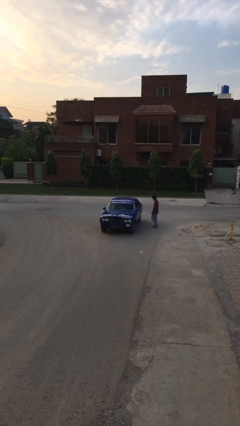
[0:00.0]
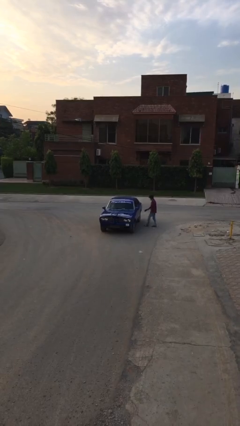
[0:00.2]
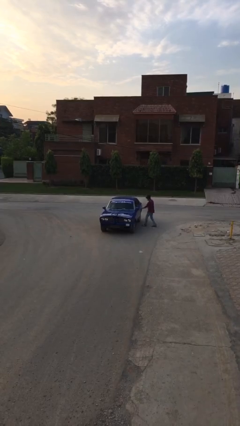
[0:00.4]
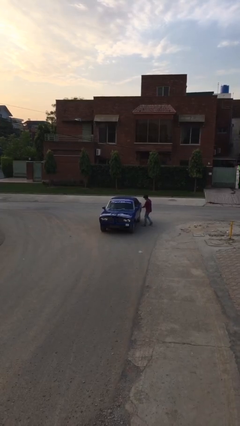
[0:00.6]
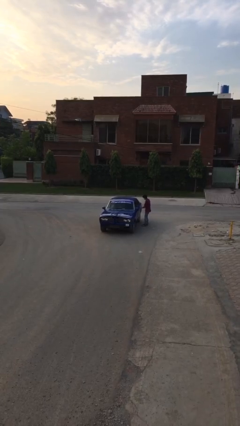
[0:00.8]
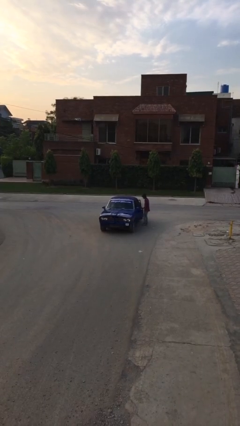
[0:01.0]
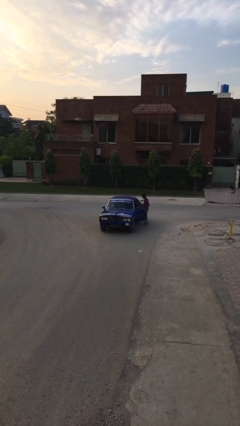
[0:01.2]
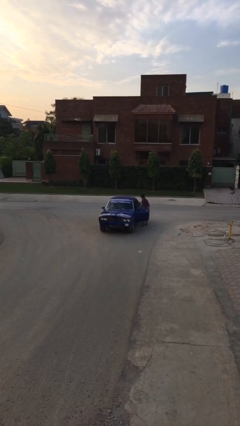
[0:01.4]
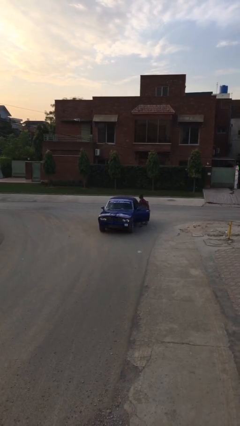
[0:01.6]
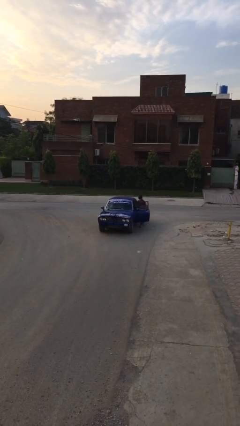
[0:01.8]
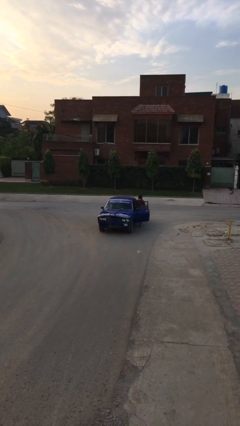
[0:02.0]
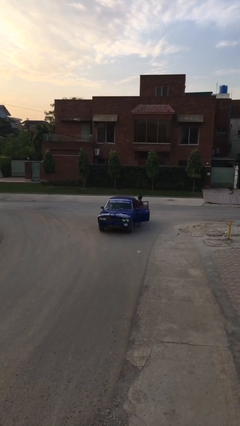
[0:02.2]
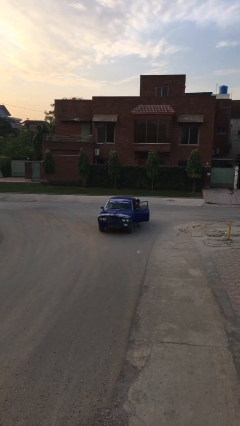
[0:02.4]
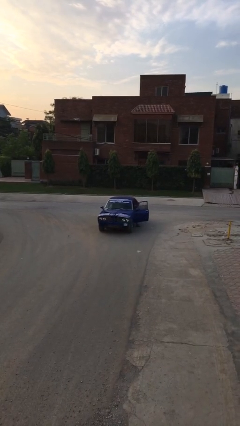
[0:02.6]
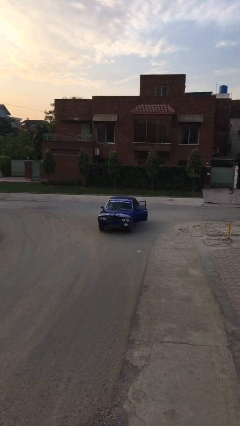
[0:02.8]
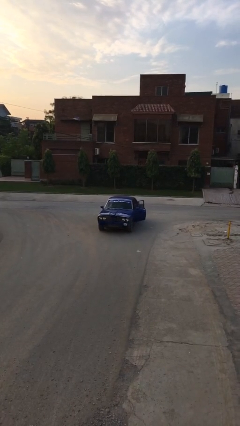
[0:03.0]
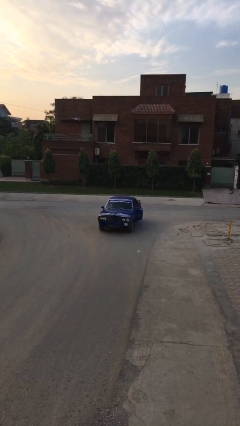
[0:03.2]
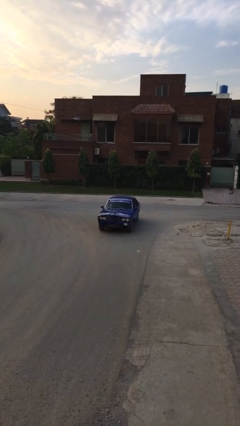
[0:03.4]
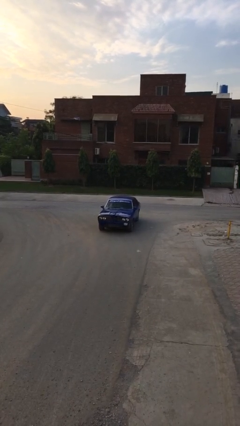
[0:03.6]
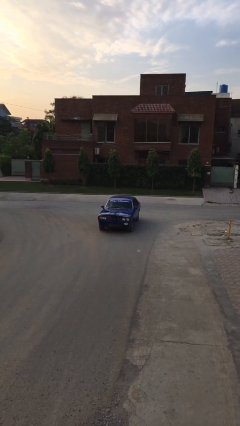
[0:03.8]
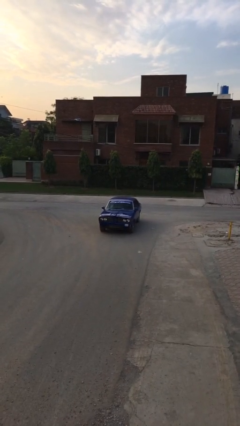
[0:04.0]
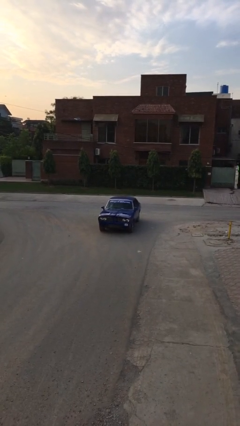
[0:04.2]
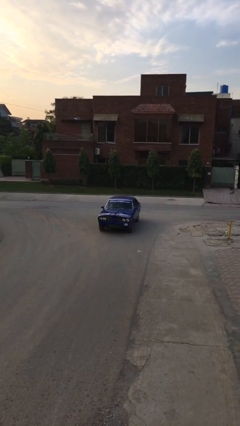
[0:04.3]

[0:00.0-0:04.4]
car picks up person

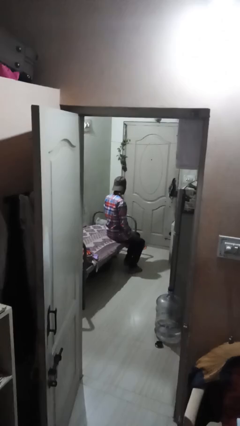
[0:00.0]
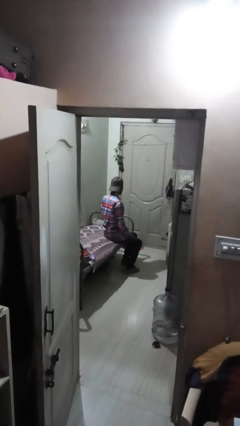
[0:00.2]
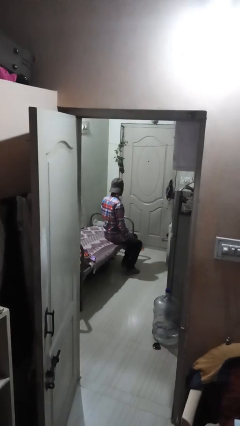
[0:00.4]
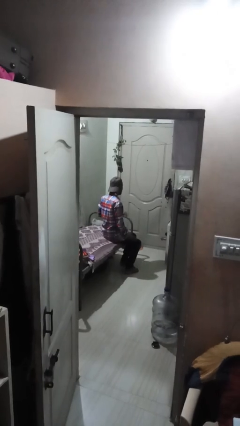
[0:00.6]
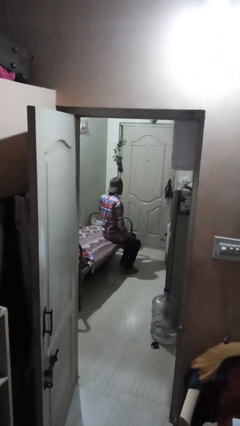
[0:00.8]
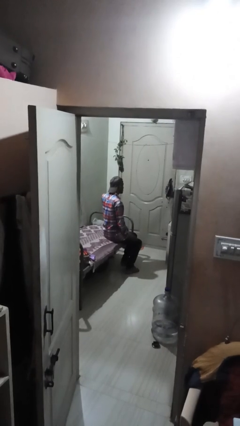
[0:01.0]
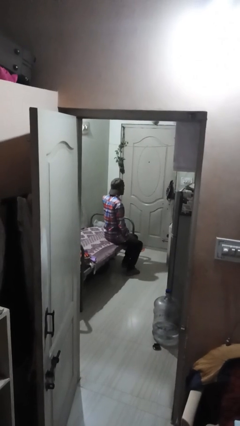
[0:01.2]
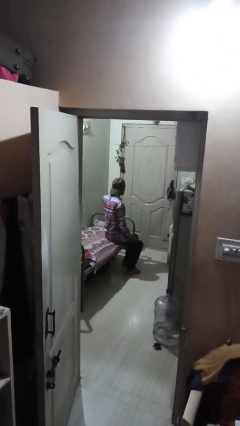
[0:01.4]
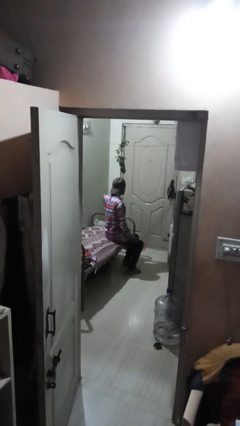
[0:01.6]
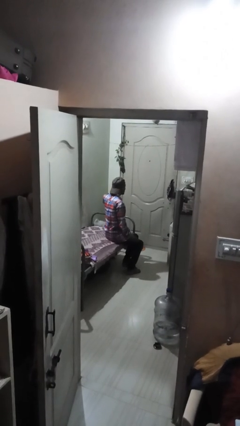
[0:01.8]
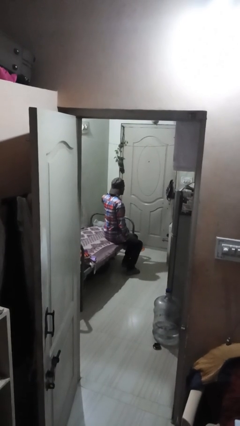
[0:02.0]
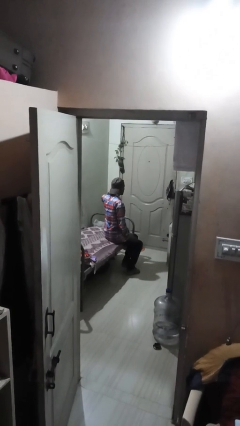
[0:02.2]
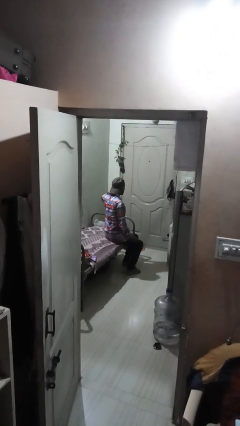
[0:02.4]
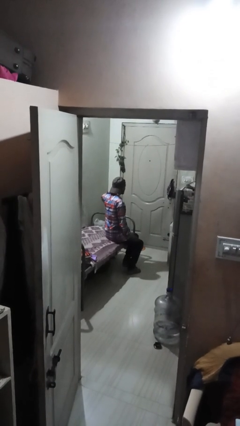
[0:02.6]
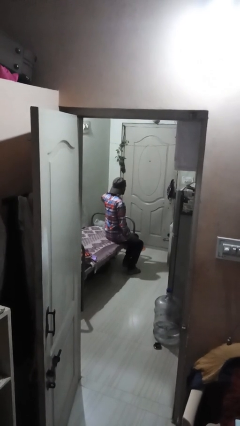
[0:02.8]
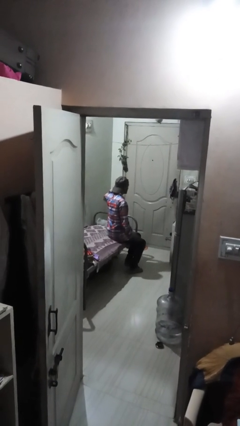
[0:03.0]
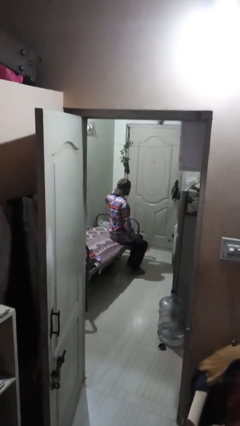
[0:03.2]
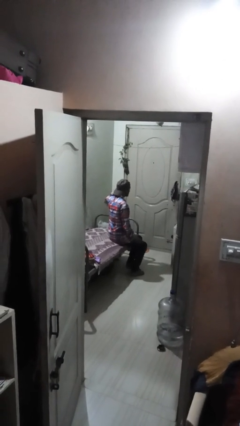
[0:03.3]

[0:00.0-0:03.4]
person rubs eyes

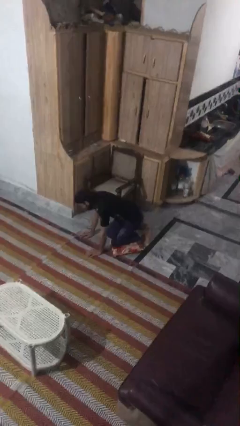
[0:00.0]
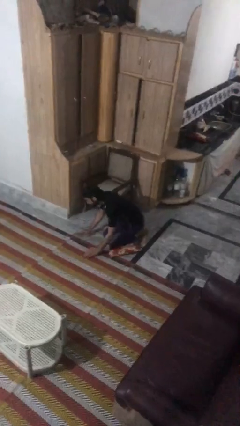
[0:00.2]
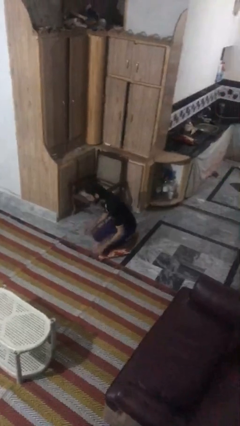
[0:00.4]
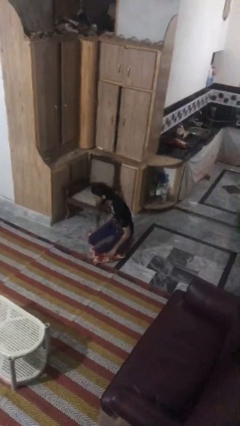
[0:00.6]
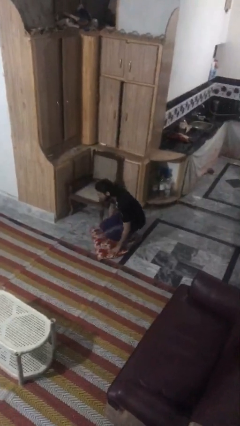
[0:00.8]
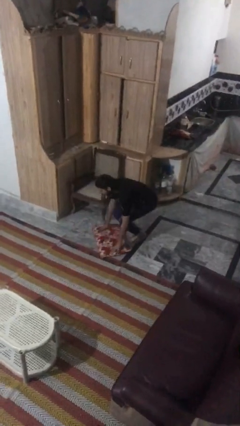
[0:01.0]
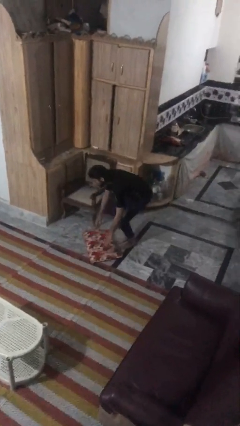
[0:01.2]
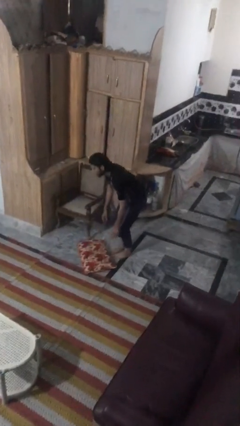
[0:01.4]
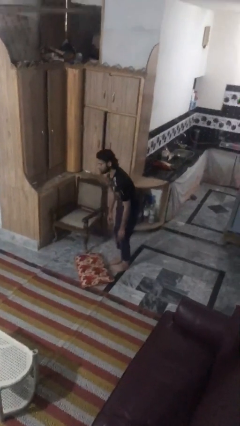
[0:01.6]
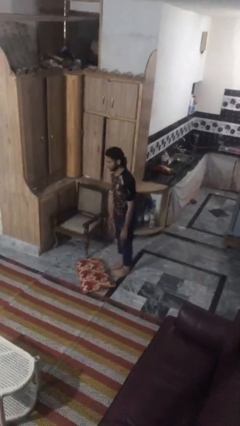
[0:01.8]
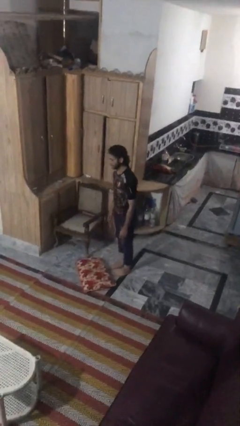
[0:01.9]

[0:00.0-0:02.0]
person stands up from floor

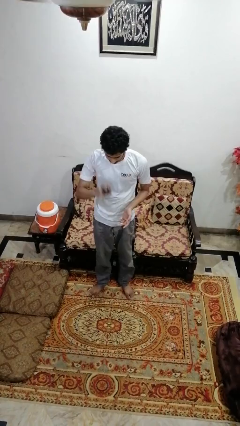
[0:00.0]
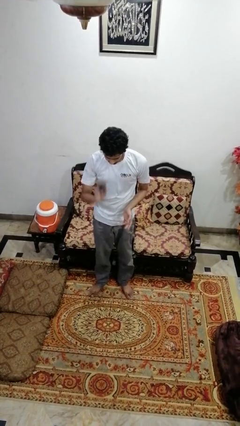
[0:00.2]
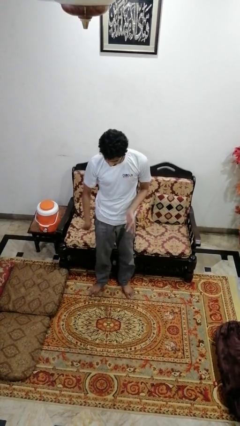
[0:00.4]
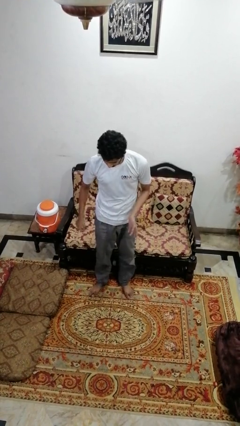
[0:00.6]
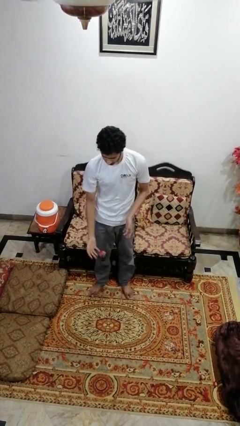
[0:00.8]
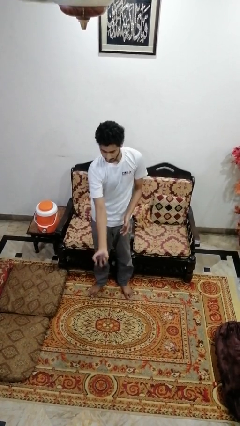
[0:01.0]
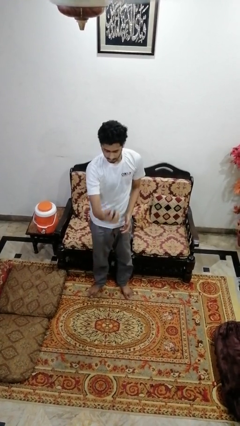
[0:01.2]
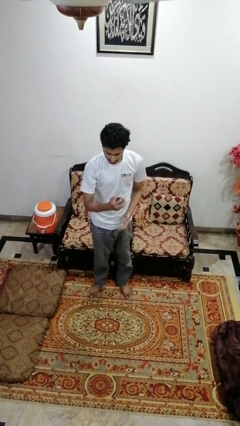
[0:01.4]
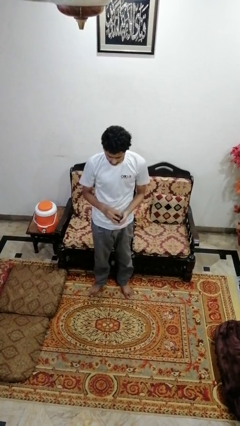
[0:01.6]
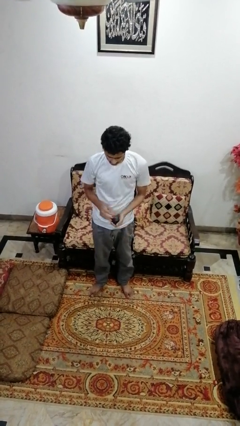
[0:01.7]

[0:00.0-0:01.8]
person bounces ball on floor

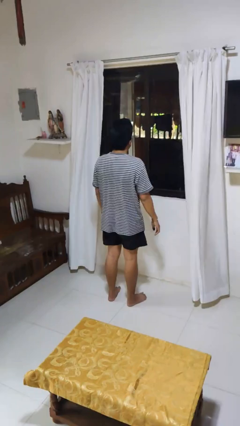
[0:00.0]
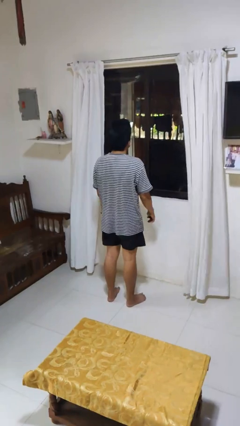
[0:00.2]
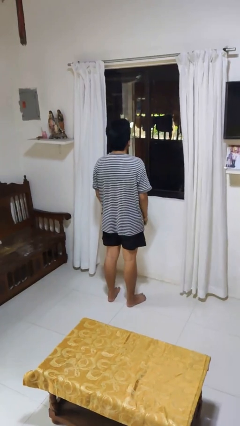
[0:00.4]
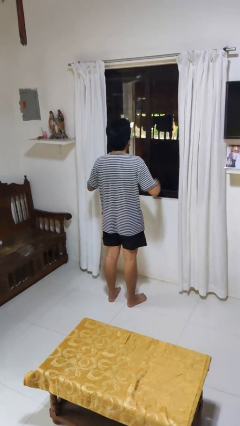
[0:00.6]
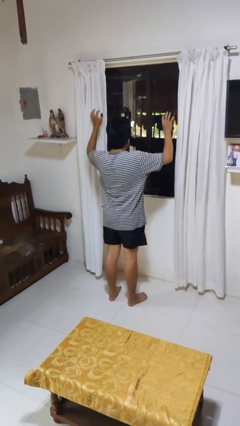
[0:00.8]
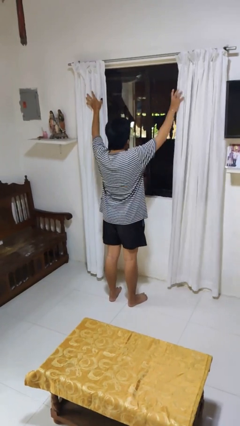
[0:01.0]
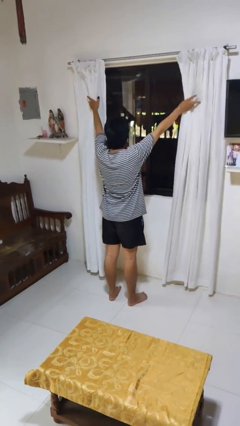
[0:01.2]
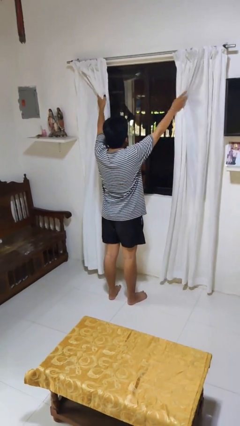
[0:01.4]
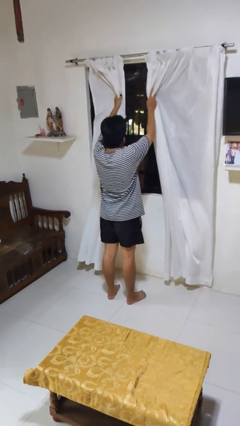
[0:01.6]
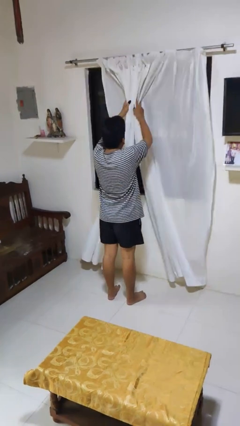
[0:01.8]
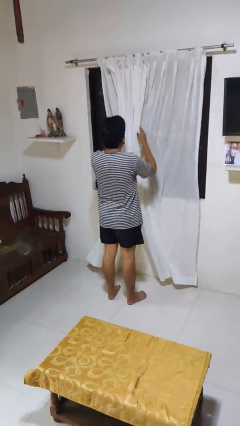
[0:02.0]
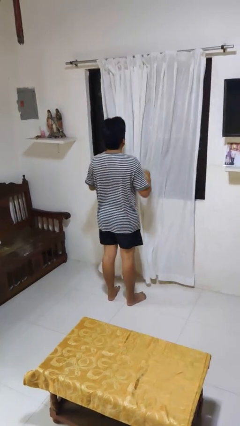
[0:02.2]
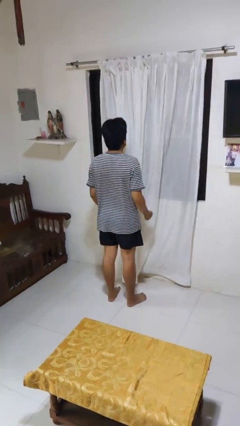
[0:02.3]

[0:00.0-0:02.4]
person closes curtains

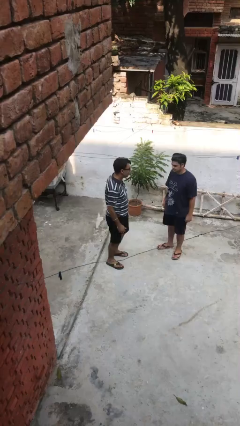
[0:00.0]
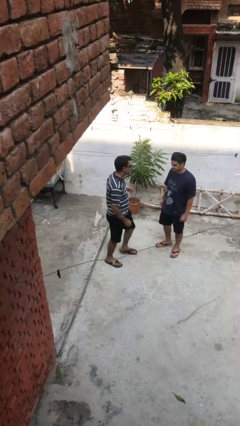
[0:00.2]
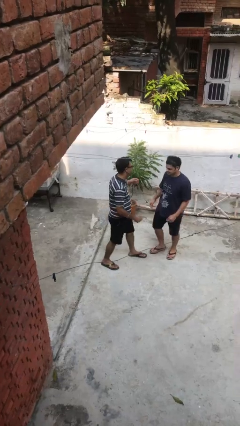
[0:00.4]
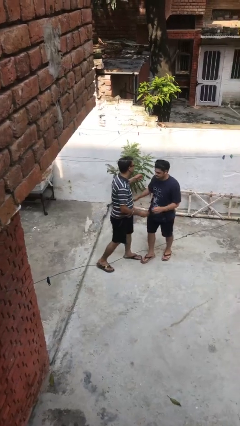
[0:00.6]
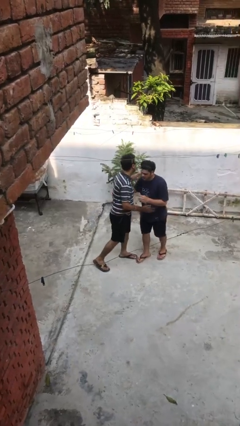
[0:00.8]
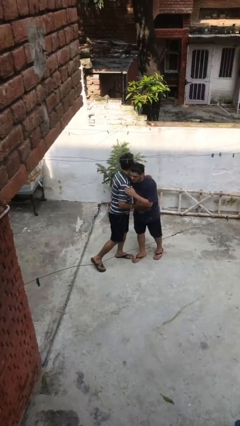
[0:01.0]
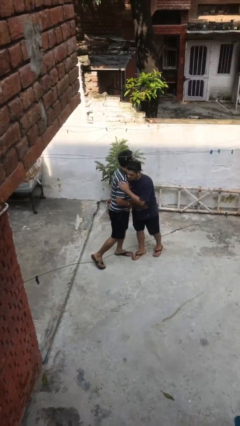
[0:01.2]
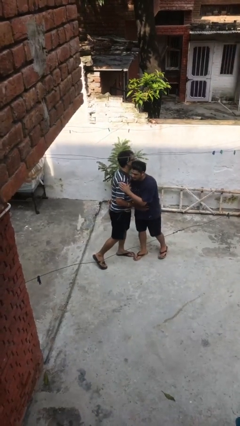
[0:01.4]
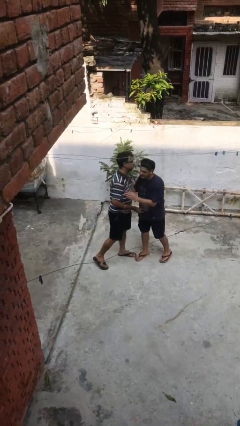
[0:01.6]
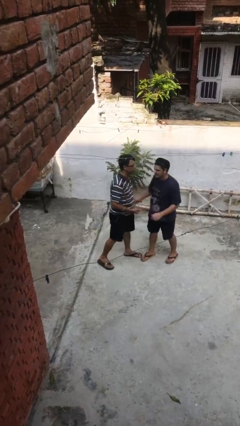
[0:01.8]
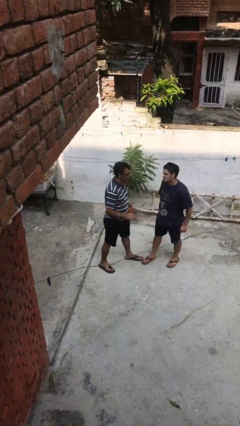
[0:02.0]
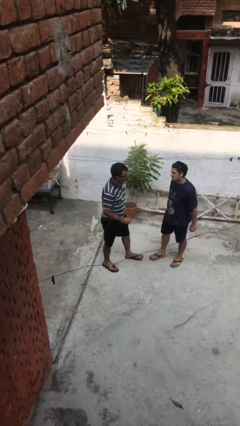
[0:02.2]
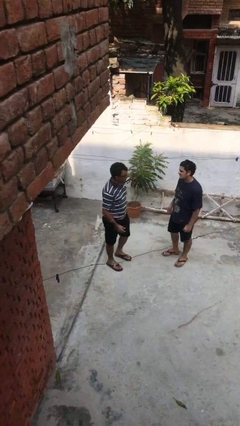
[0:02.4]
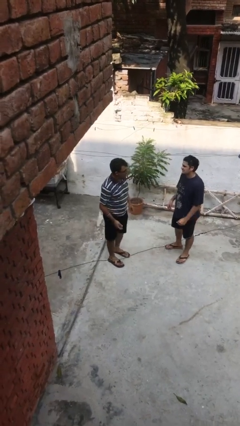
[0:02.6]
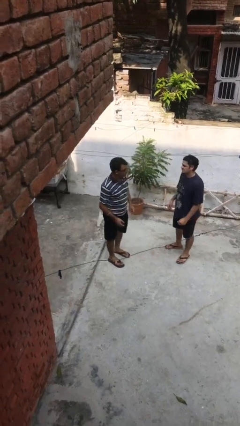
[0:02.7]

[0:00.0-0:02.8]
person embraces person

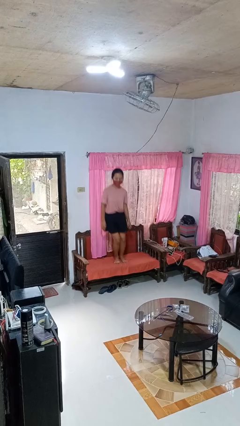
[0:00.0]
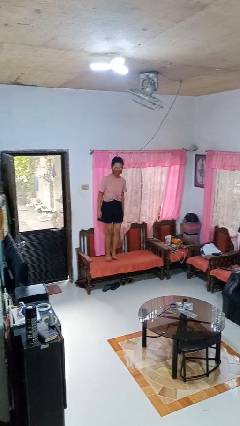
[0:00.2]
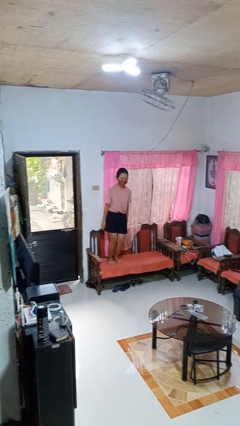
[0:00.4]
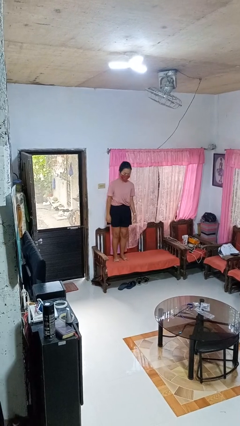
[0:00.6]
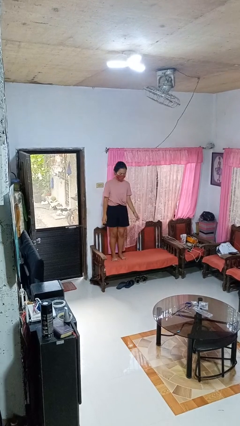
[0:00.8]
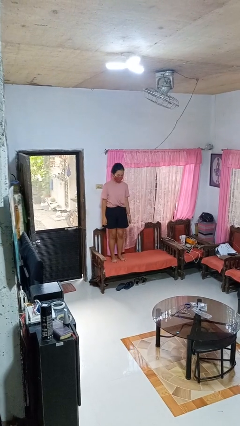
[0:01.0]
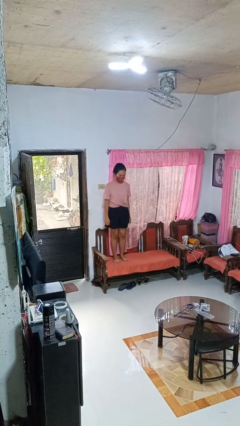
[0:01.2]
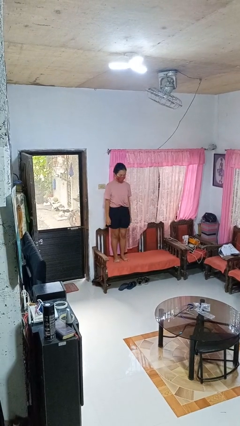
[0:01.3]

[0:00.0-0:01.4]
person jumps on couch
